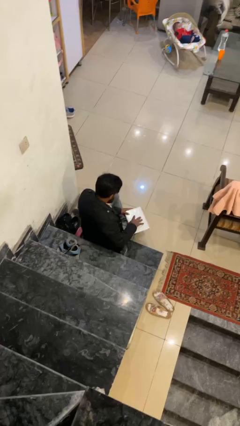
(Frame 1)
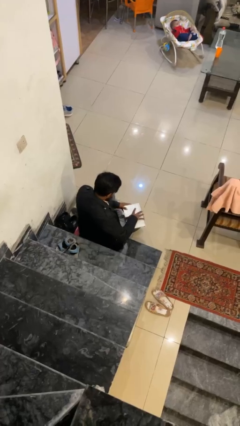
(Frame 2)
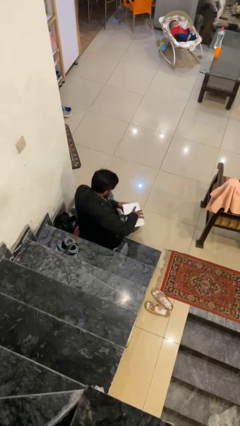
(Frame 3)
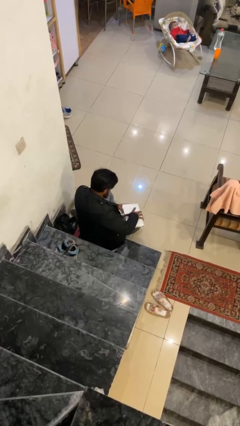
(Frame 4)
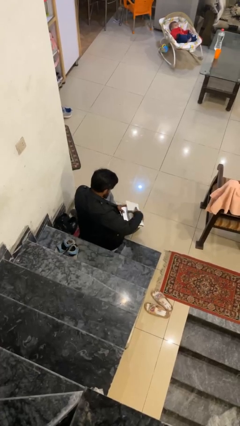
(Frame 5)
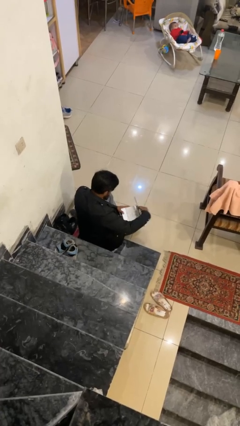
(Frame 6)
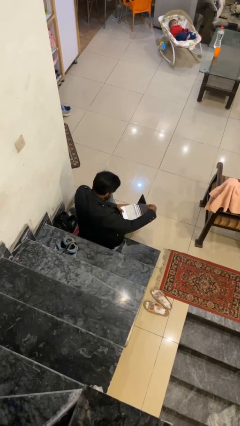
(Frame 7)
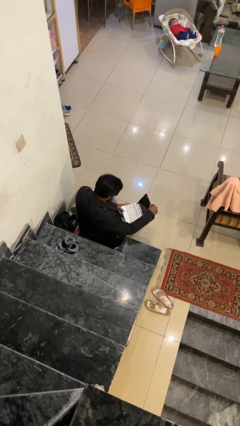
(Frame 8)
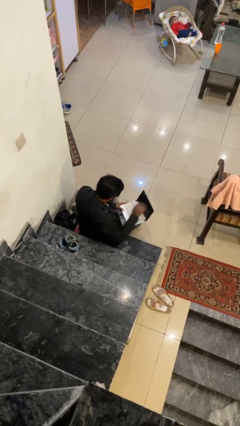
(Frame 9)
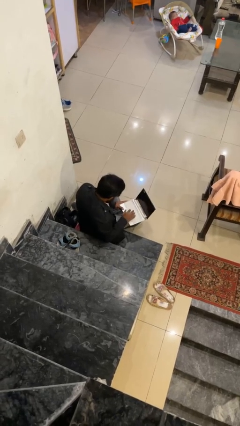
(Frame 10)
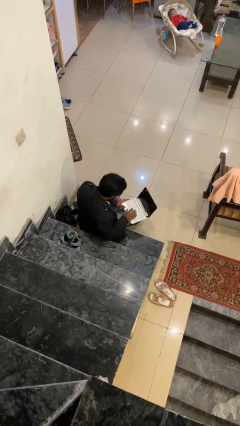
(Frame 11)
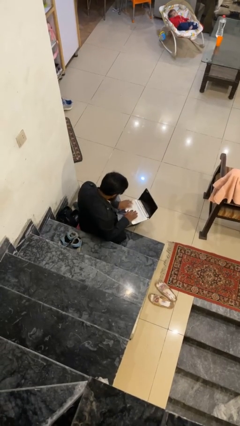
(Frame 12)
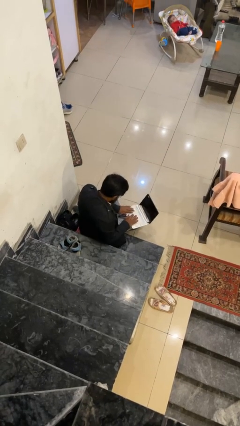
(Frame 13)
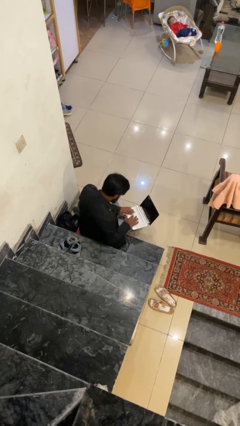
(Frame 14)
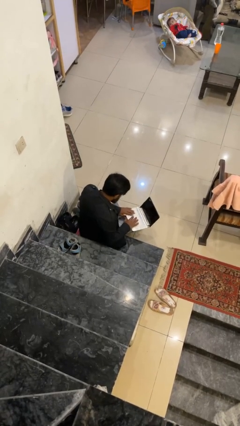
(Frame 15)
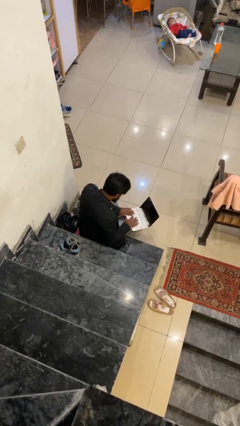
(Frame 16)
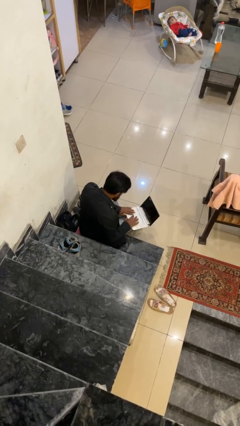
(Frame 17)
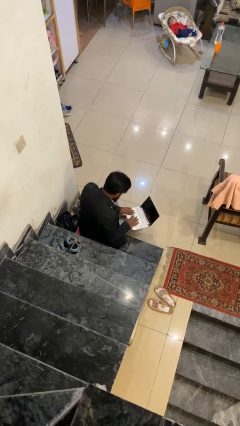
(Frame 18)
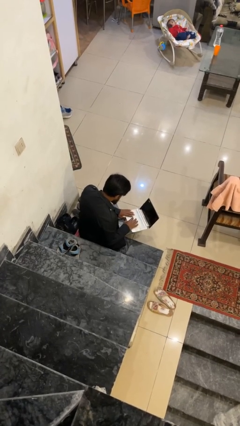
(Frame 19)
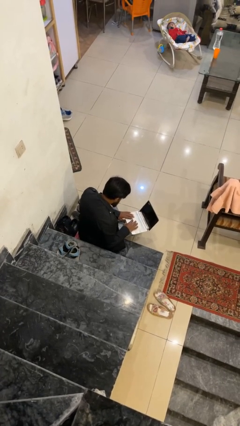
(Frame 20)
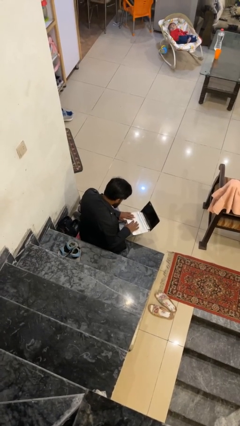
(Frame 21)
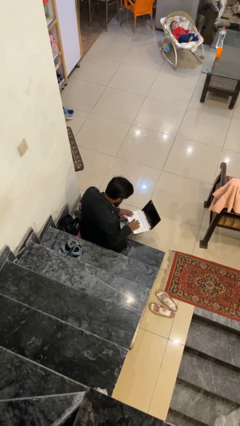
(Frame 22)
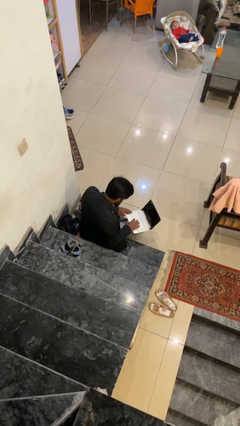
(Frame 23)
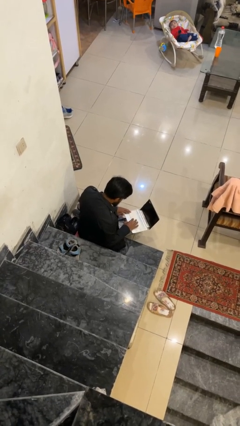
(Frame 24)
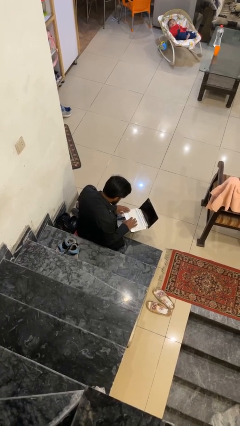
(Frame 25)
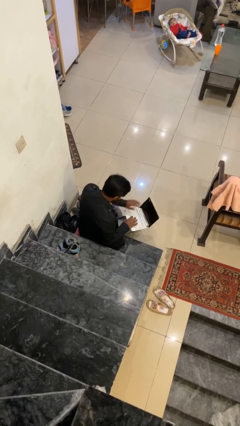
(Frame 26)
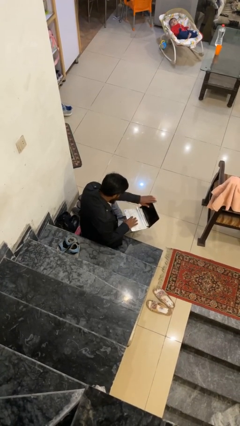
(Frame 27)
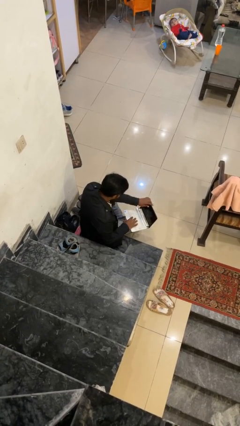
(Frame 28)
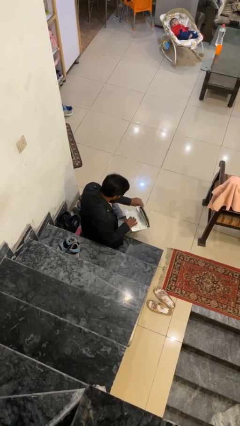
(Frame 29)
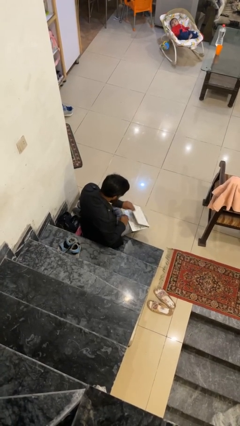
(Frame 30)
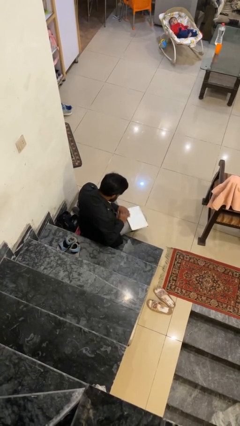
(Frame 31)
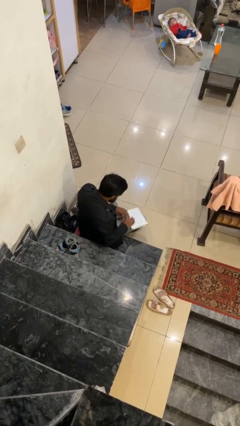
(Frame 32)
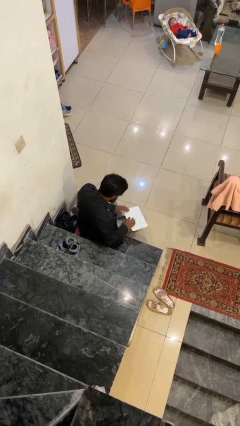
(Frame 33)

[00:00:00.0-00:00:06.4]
person interacts with laptop

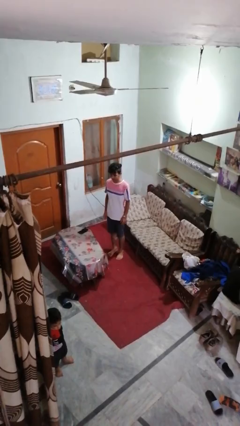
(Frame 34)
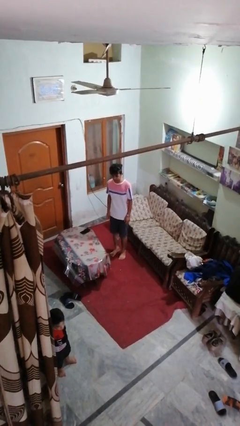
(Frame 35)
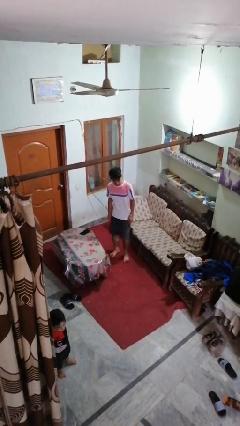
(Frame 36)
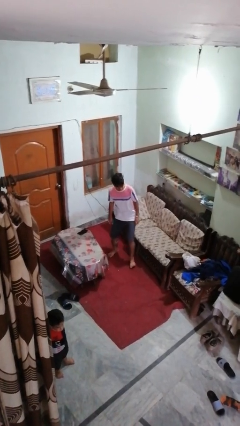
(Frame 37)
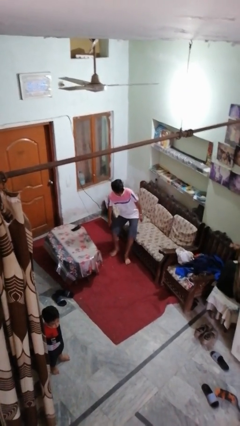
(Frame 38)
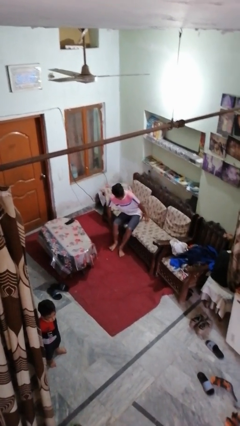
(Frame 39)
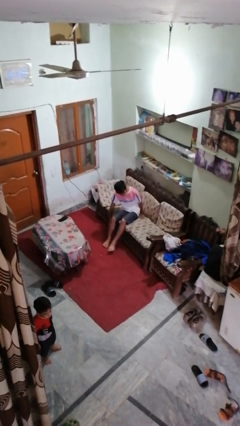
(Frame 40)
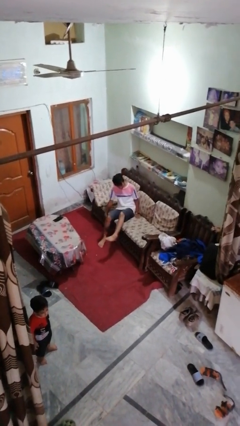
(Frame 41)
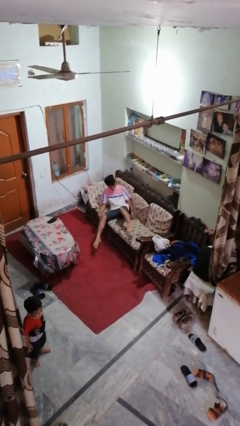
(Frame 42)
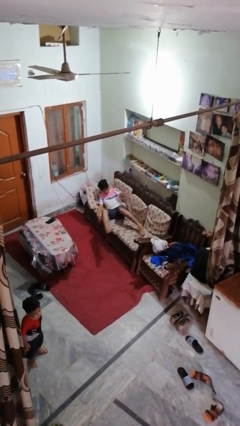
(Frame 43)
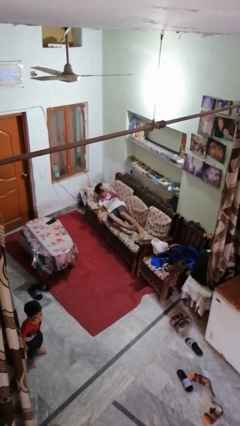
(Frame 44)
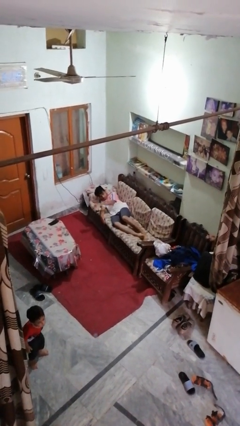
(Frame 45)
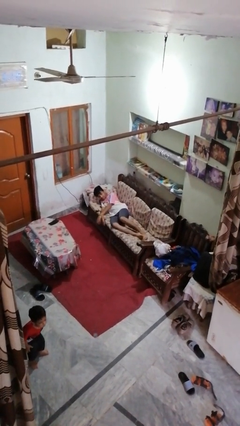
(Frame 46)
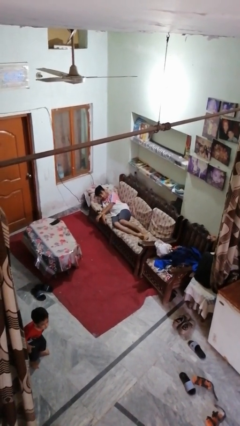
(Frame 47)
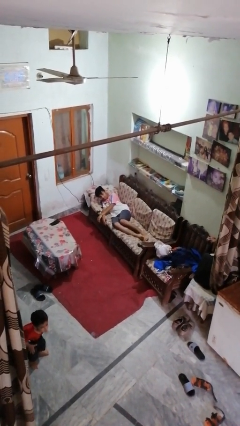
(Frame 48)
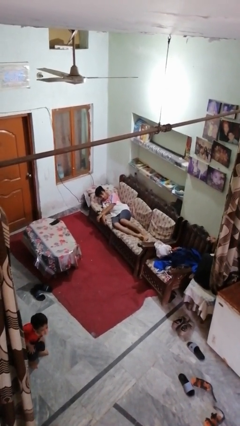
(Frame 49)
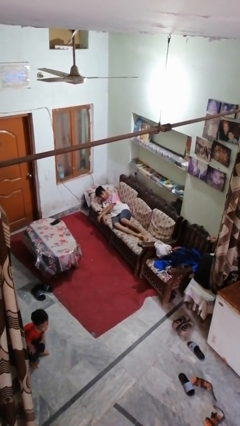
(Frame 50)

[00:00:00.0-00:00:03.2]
person lies down on couch

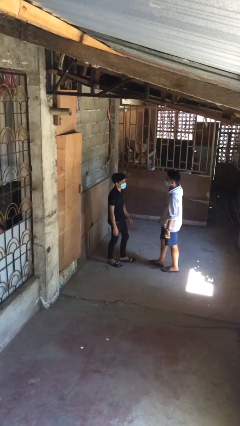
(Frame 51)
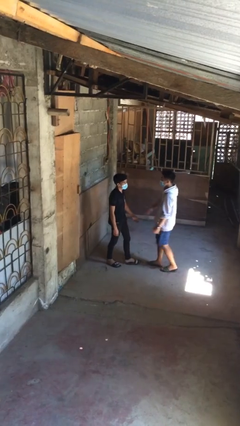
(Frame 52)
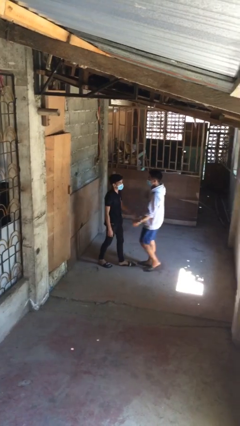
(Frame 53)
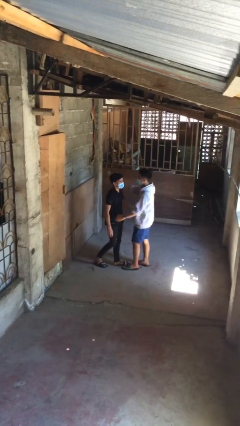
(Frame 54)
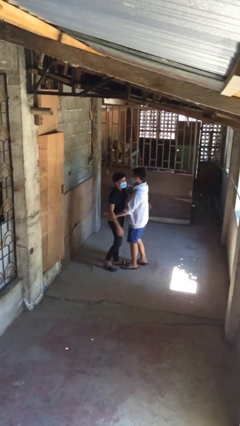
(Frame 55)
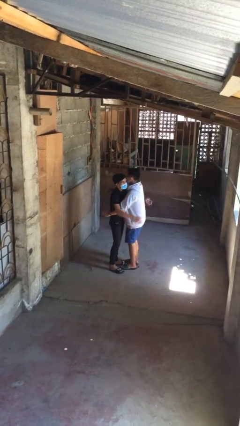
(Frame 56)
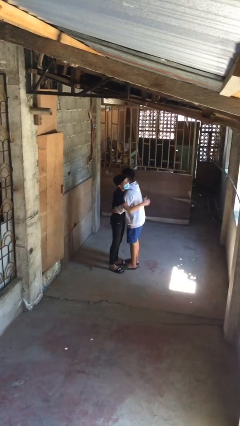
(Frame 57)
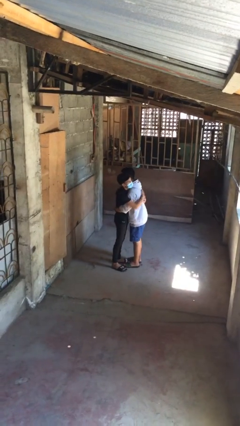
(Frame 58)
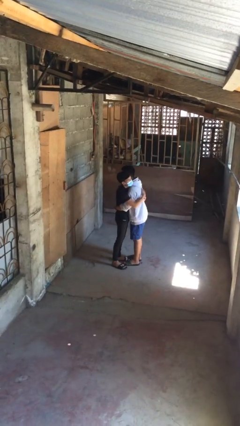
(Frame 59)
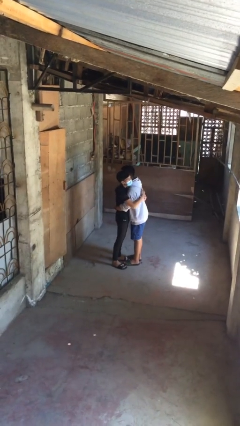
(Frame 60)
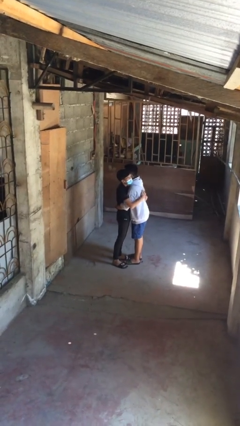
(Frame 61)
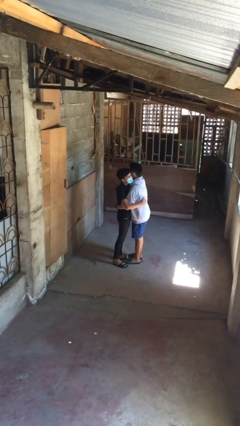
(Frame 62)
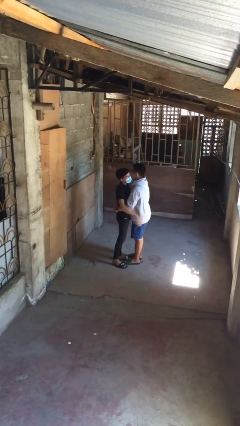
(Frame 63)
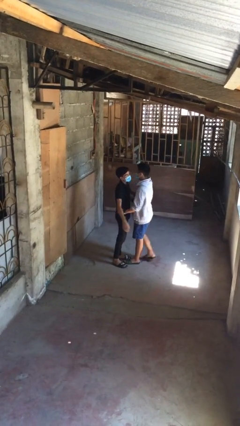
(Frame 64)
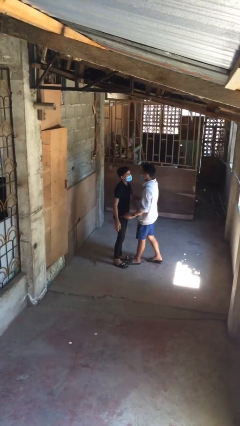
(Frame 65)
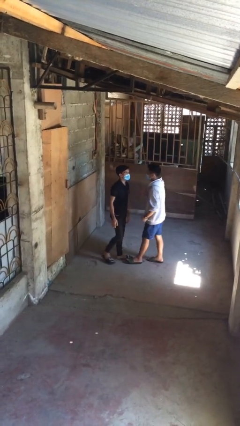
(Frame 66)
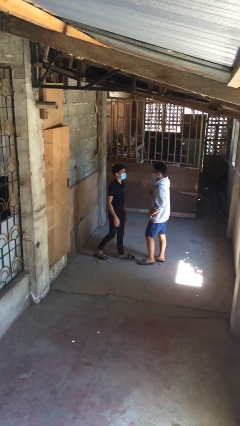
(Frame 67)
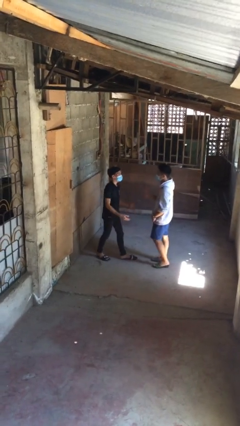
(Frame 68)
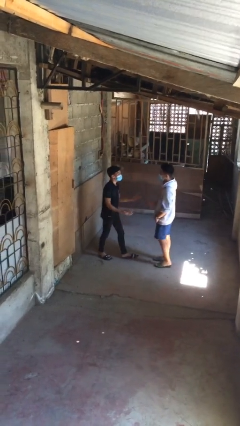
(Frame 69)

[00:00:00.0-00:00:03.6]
person embraces person

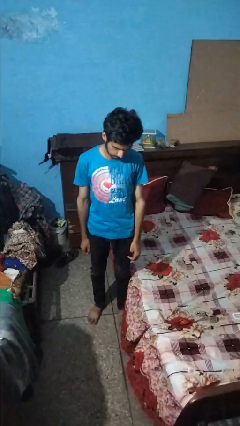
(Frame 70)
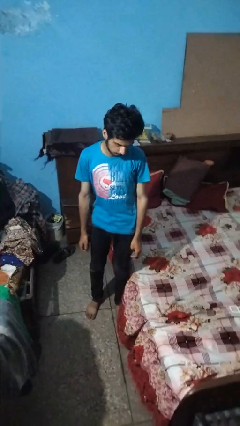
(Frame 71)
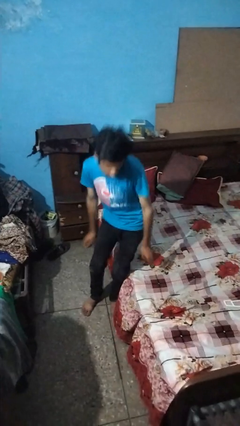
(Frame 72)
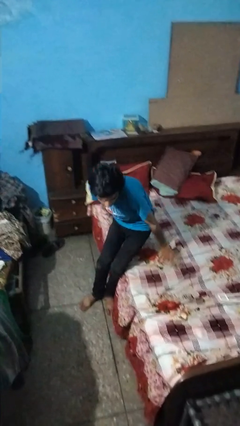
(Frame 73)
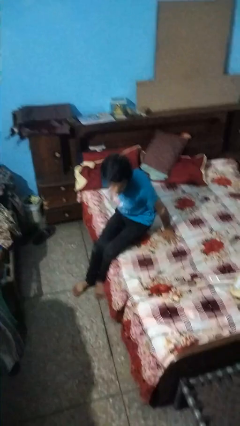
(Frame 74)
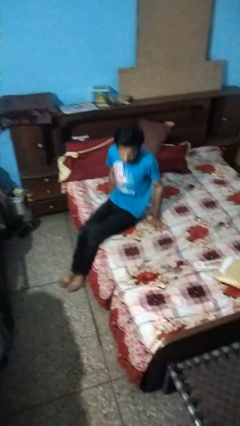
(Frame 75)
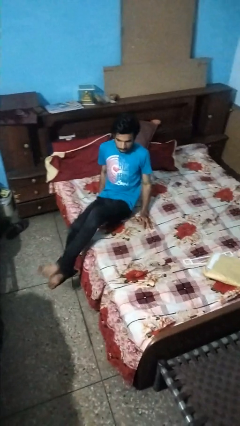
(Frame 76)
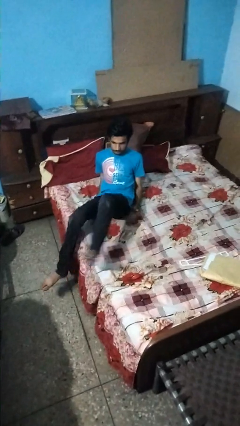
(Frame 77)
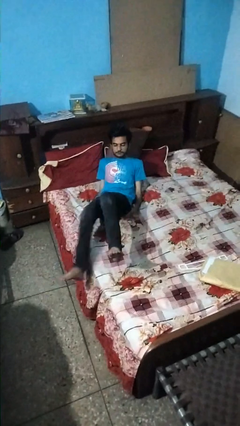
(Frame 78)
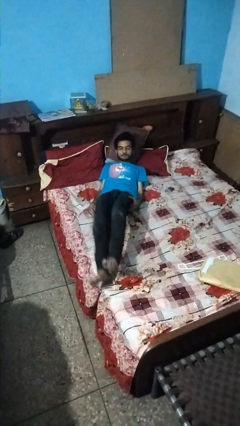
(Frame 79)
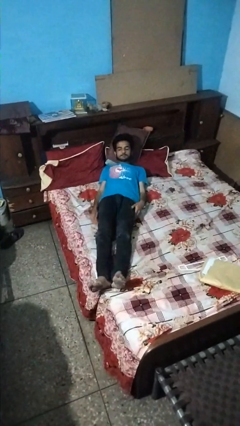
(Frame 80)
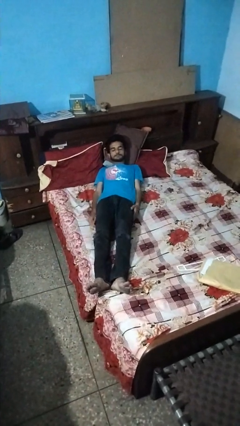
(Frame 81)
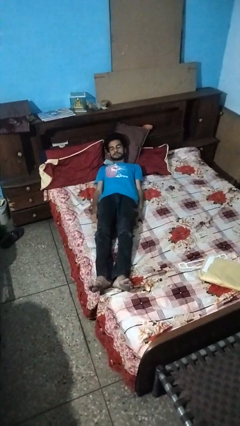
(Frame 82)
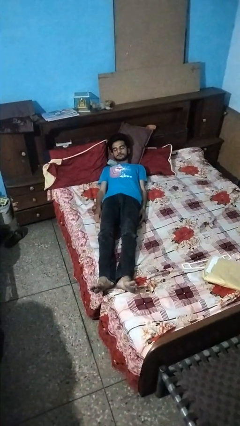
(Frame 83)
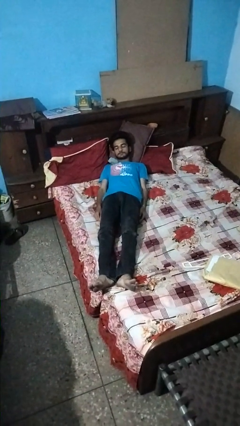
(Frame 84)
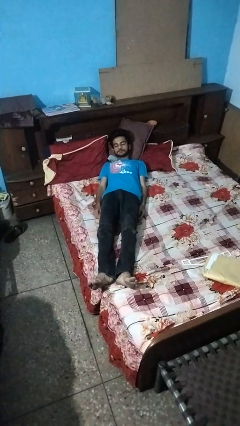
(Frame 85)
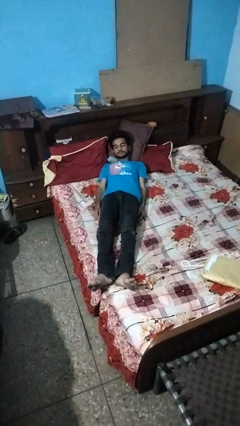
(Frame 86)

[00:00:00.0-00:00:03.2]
person lies down on bed

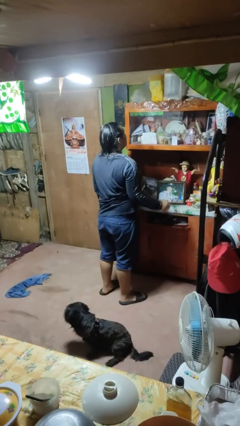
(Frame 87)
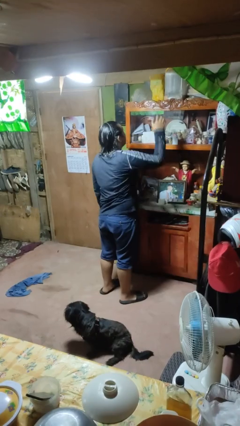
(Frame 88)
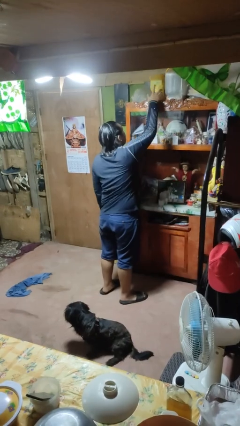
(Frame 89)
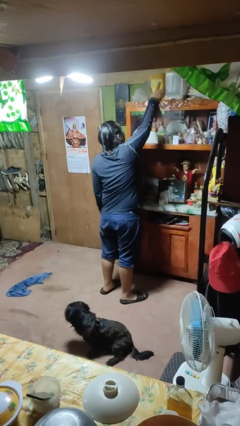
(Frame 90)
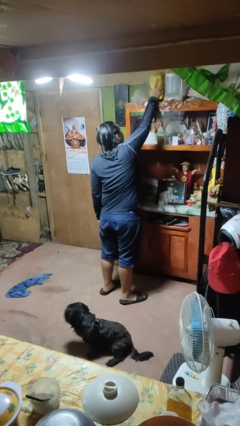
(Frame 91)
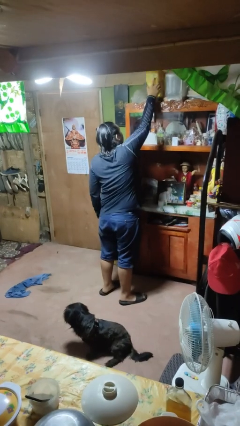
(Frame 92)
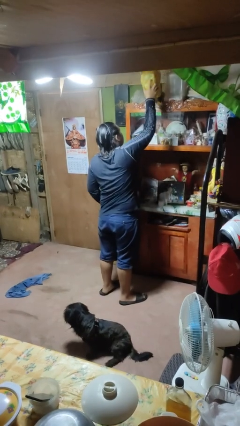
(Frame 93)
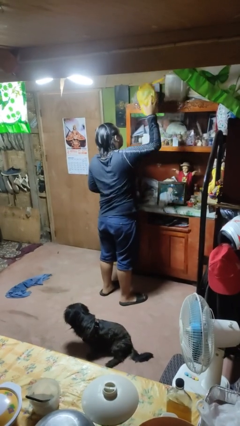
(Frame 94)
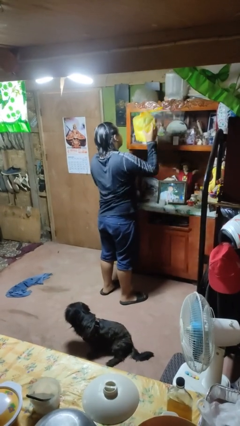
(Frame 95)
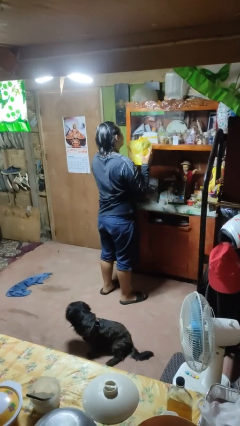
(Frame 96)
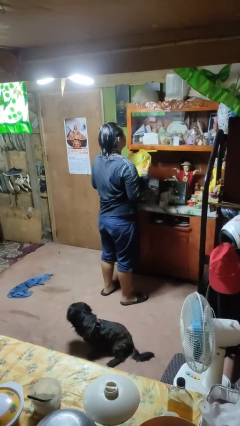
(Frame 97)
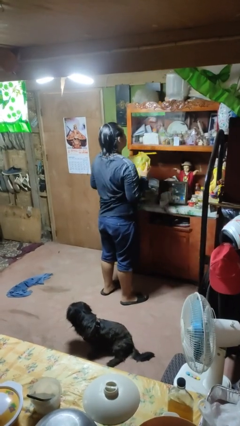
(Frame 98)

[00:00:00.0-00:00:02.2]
person picks up object from shelf
